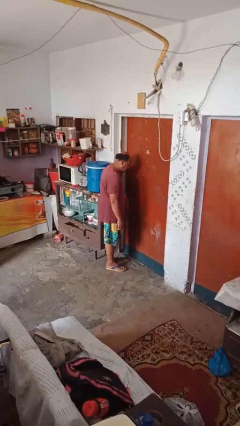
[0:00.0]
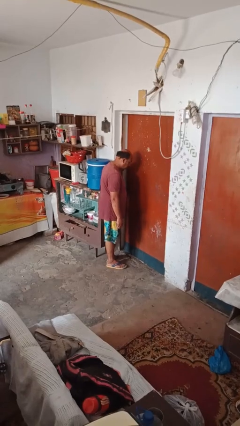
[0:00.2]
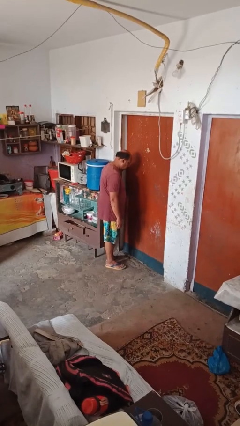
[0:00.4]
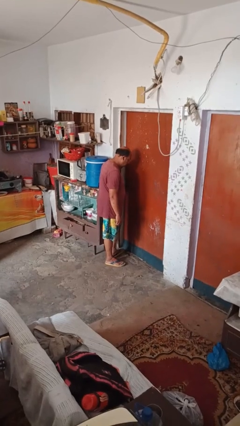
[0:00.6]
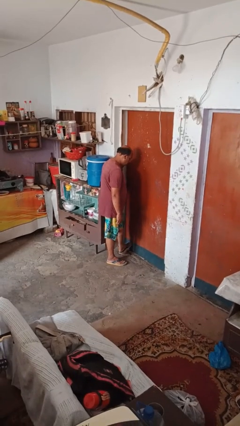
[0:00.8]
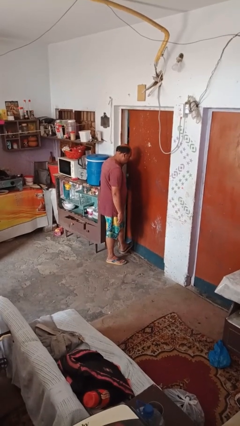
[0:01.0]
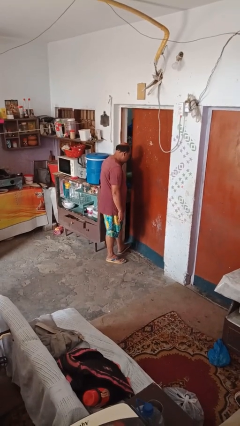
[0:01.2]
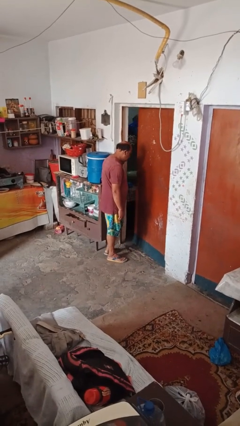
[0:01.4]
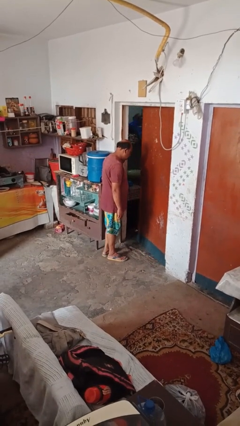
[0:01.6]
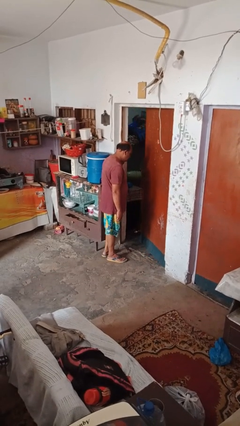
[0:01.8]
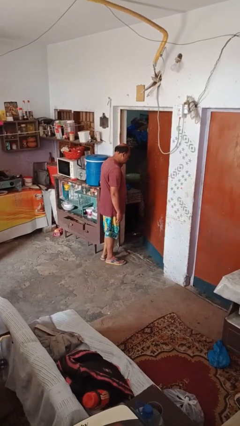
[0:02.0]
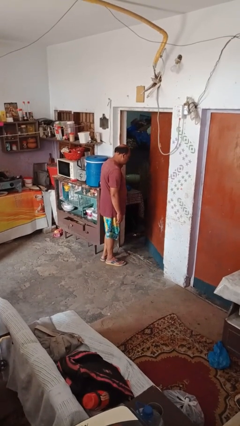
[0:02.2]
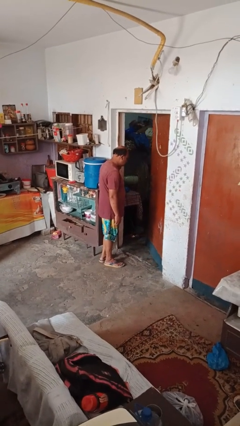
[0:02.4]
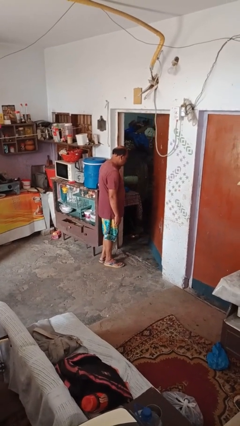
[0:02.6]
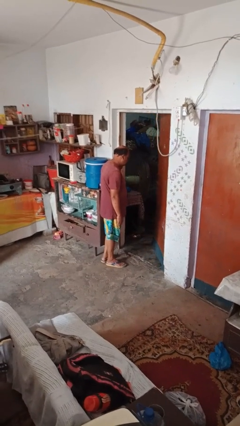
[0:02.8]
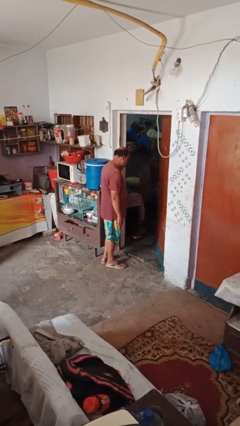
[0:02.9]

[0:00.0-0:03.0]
person opens facility door

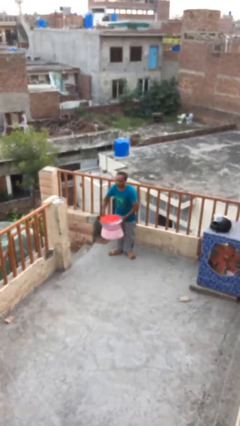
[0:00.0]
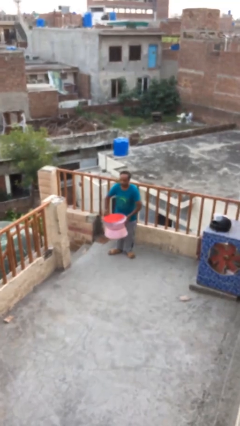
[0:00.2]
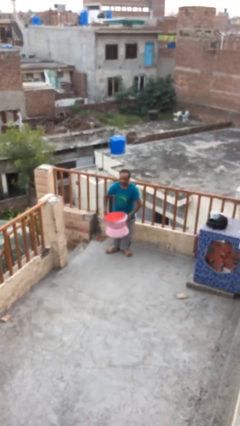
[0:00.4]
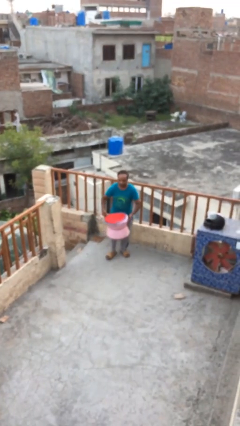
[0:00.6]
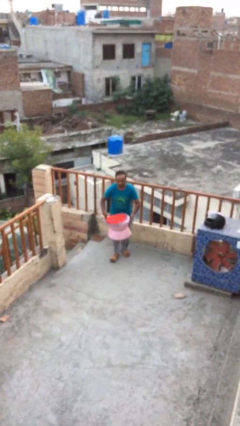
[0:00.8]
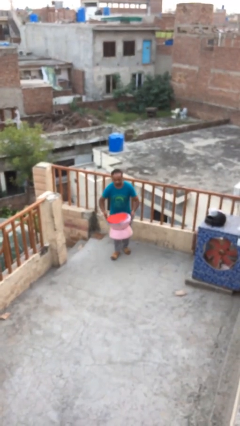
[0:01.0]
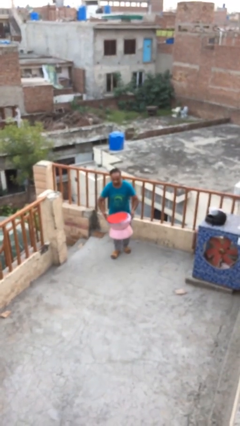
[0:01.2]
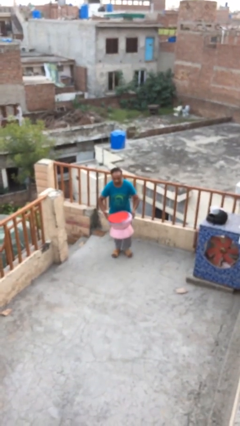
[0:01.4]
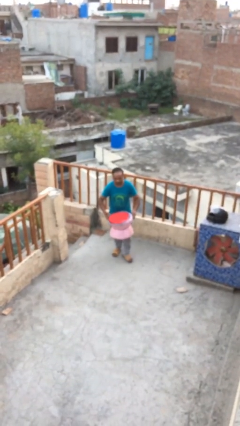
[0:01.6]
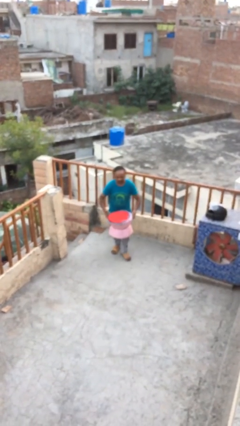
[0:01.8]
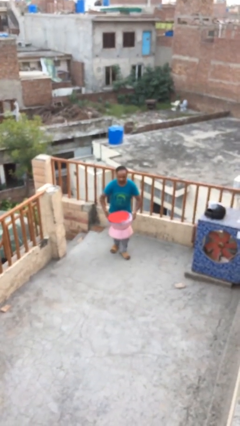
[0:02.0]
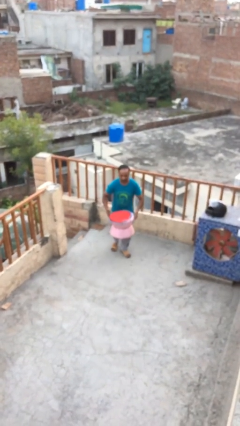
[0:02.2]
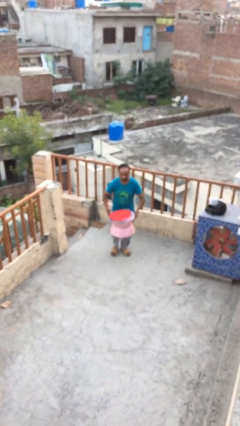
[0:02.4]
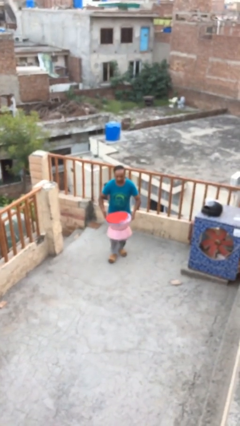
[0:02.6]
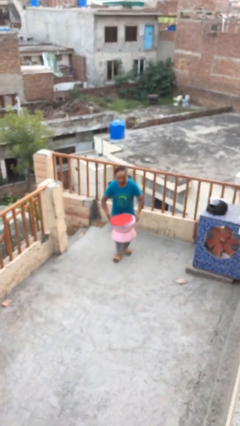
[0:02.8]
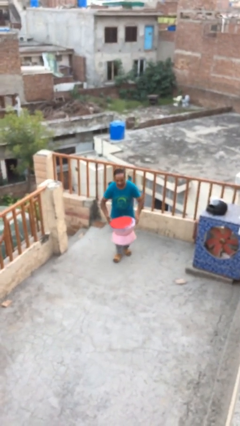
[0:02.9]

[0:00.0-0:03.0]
person carries heavy object

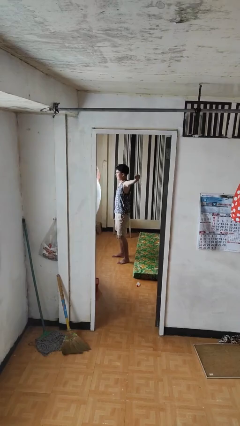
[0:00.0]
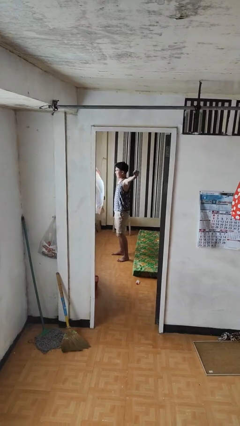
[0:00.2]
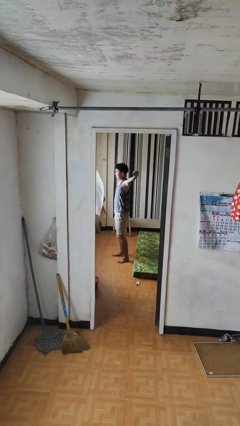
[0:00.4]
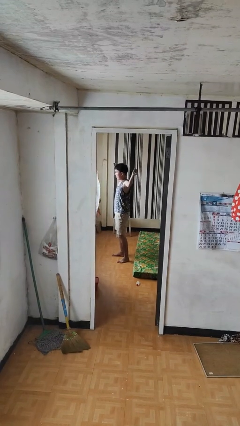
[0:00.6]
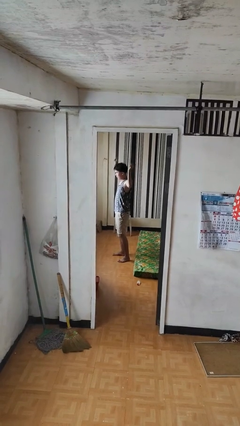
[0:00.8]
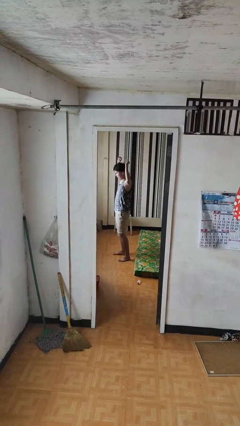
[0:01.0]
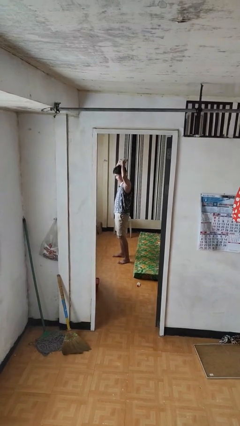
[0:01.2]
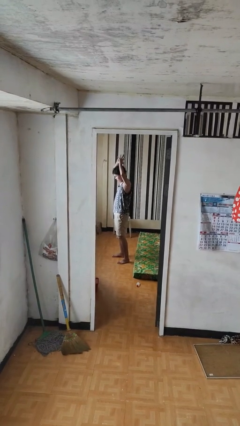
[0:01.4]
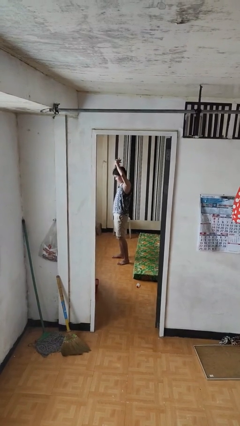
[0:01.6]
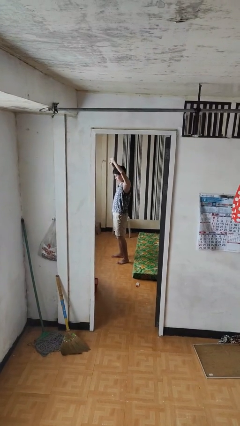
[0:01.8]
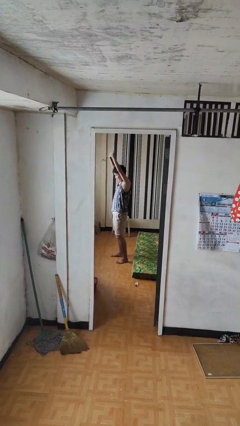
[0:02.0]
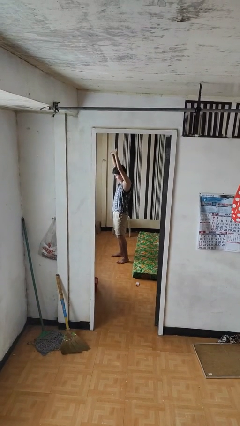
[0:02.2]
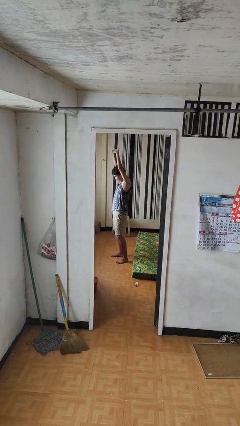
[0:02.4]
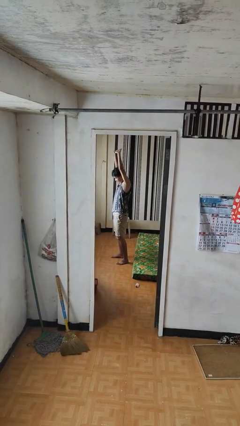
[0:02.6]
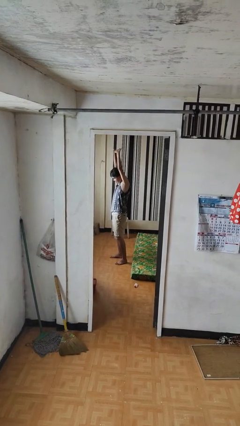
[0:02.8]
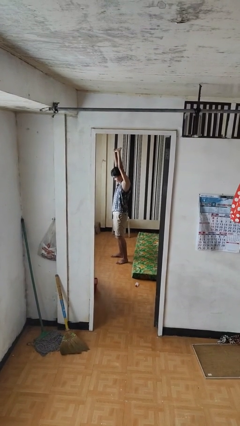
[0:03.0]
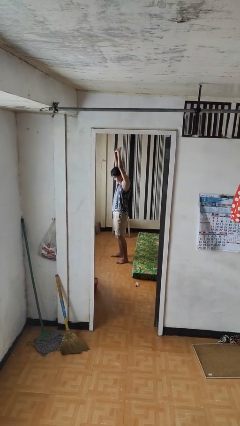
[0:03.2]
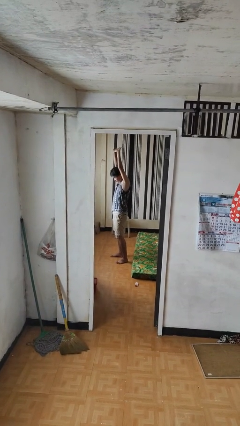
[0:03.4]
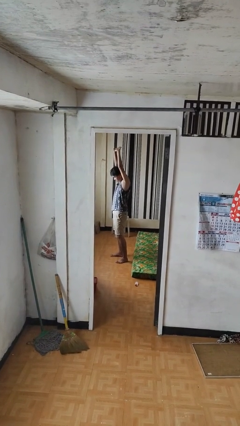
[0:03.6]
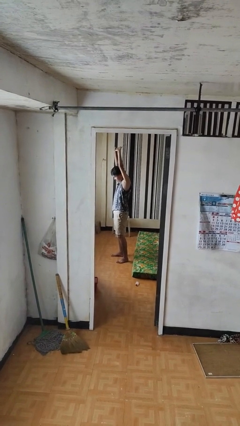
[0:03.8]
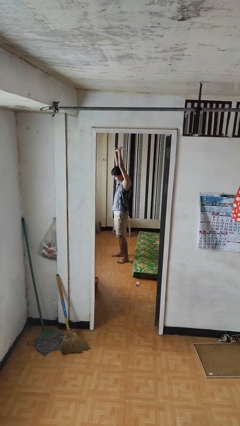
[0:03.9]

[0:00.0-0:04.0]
person stretches arms over head

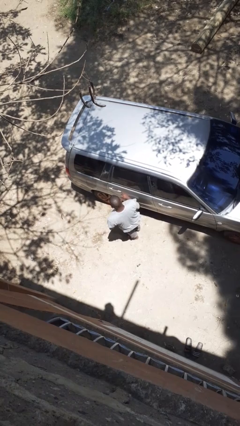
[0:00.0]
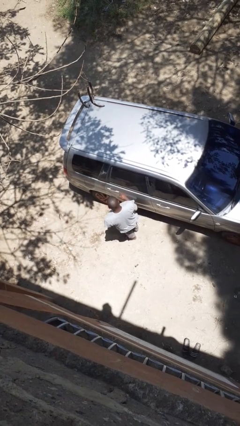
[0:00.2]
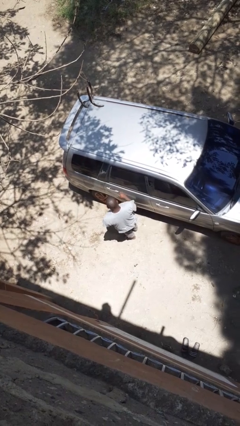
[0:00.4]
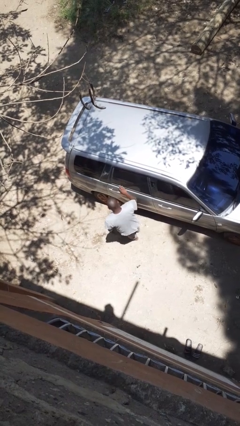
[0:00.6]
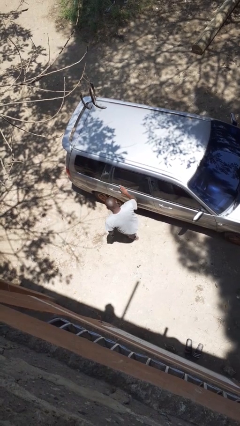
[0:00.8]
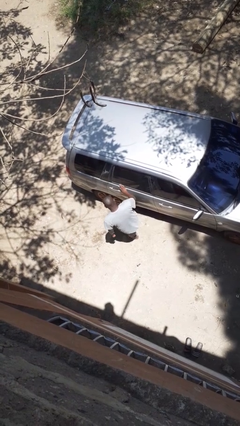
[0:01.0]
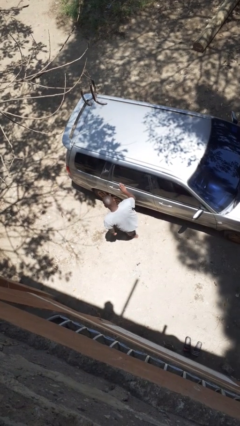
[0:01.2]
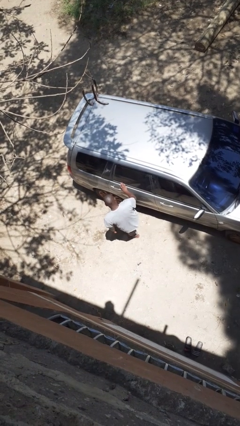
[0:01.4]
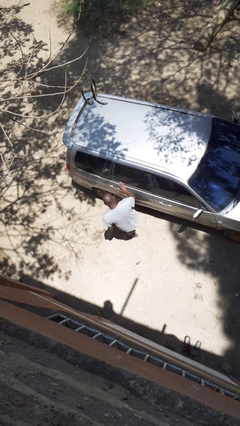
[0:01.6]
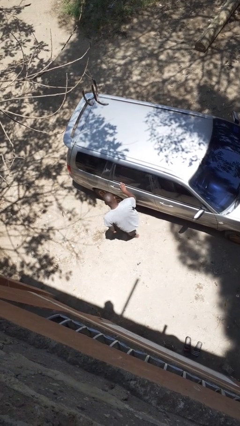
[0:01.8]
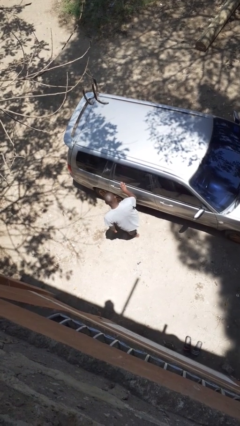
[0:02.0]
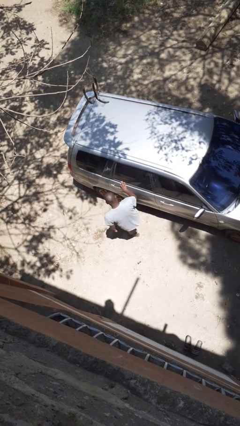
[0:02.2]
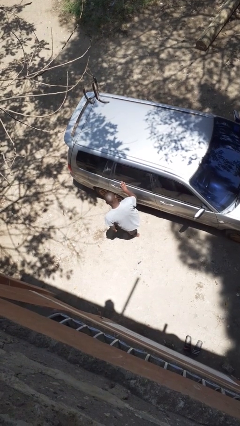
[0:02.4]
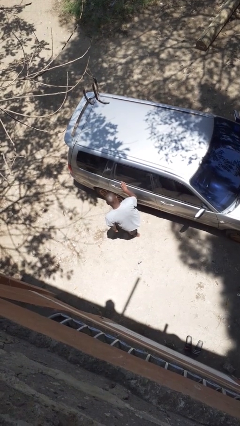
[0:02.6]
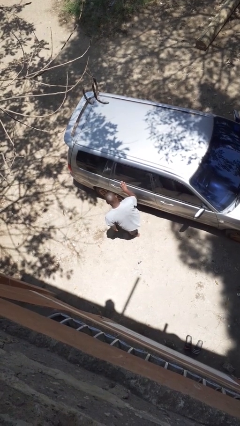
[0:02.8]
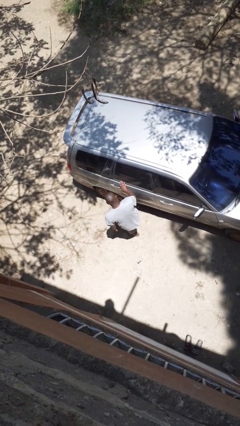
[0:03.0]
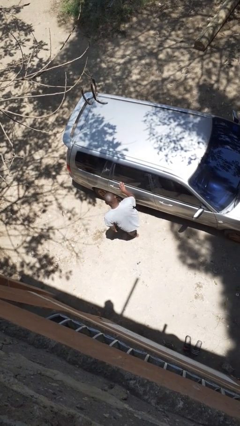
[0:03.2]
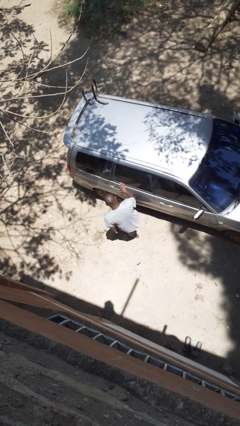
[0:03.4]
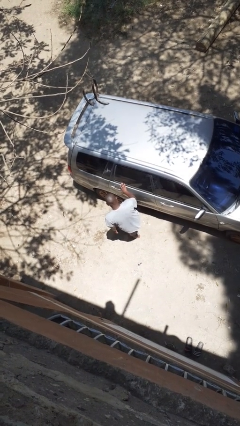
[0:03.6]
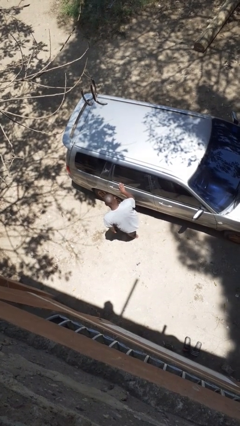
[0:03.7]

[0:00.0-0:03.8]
person kicks car tires

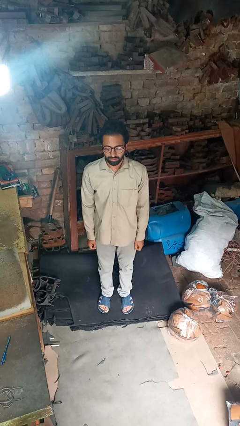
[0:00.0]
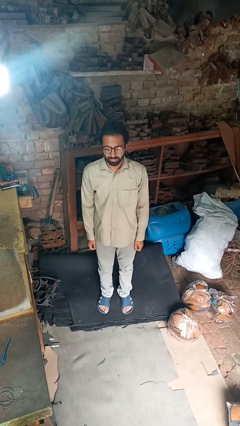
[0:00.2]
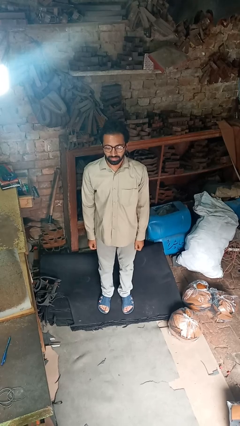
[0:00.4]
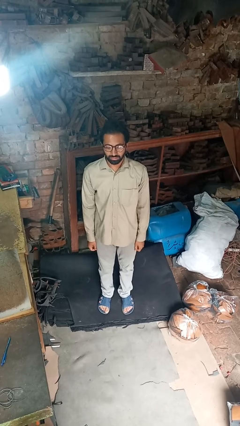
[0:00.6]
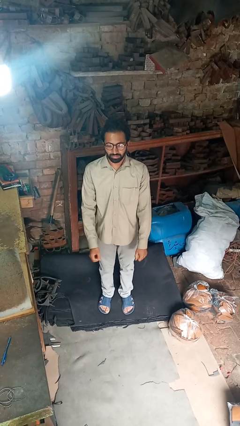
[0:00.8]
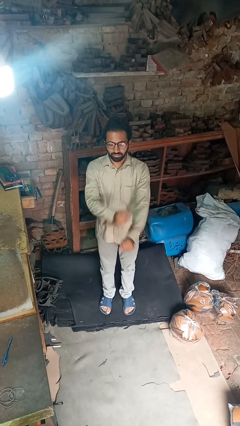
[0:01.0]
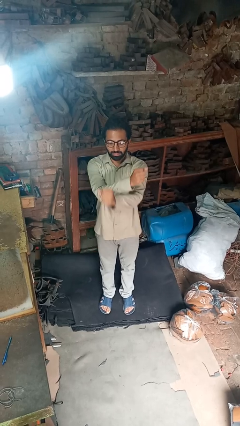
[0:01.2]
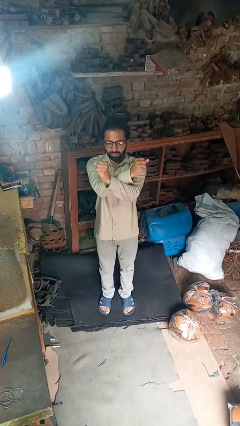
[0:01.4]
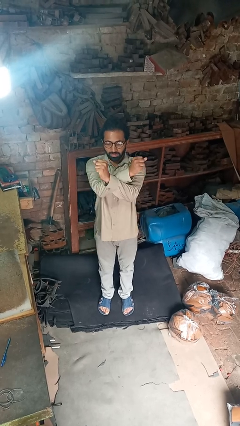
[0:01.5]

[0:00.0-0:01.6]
person crosses arms

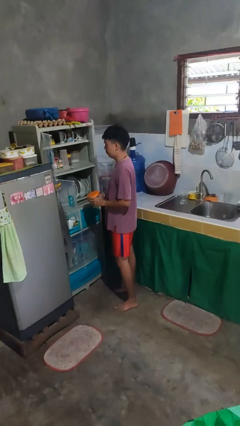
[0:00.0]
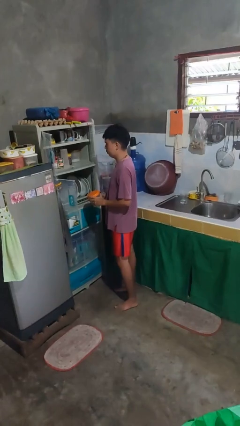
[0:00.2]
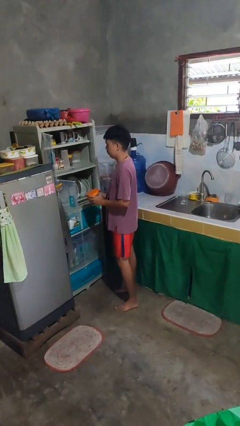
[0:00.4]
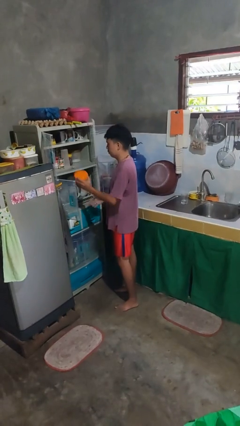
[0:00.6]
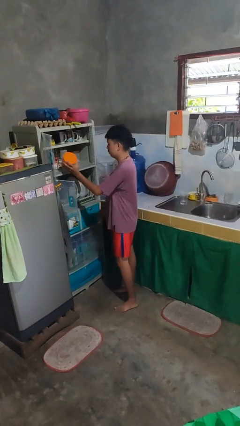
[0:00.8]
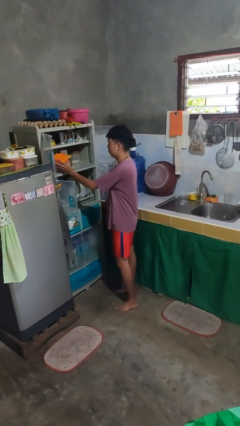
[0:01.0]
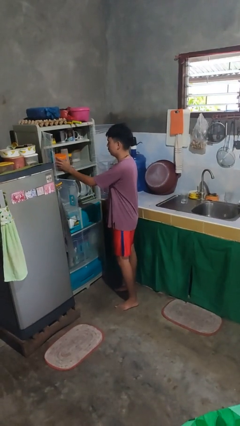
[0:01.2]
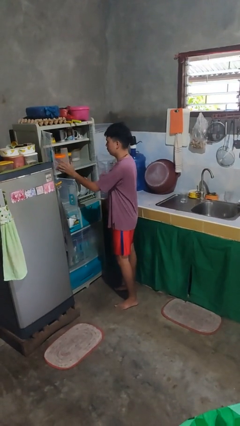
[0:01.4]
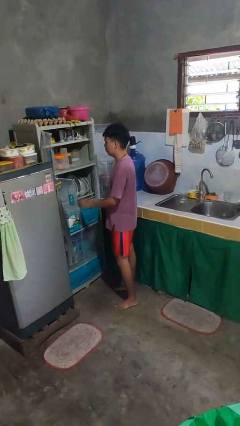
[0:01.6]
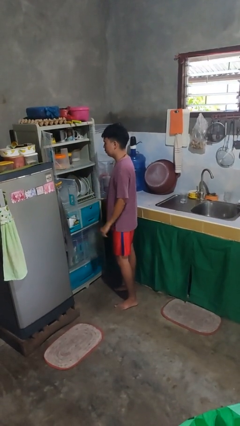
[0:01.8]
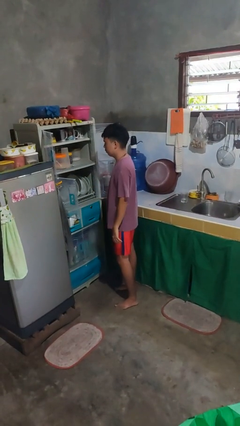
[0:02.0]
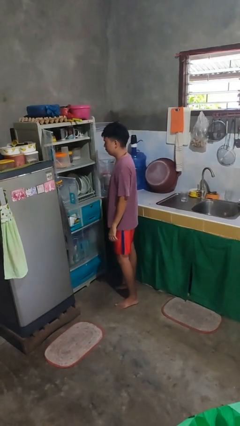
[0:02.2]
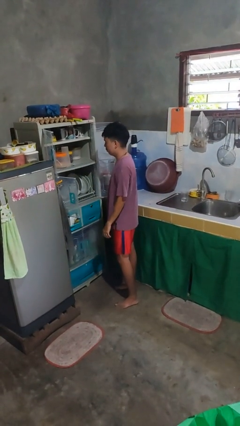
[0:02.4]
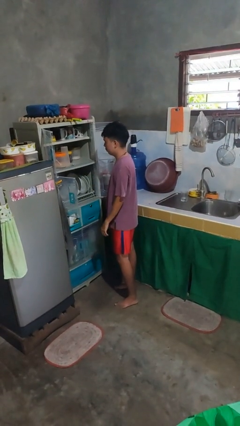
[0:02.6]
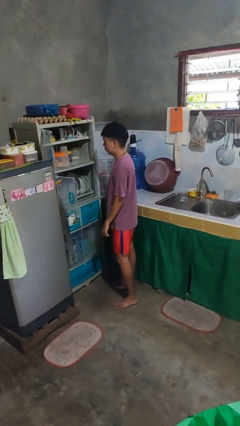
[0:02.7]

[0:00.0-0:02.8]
person puts object in cabinet
